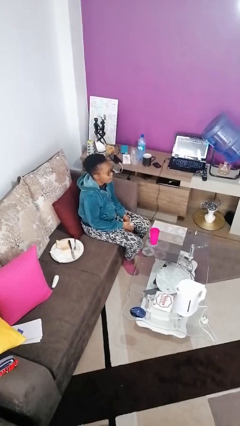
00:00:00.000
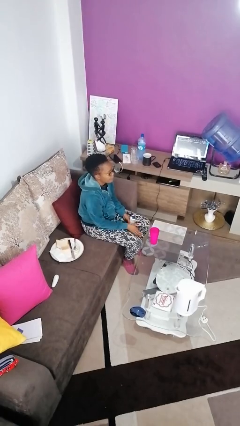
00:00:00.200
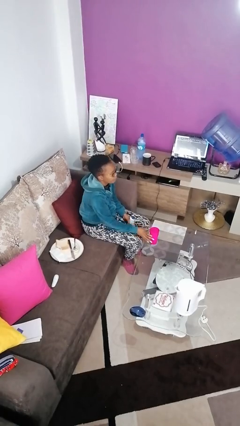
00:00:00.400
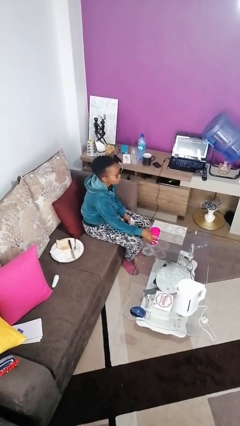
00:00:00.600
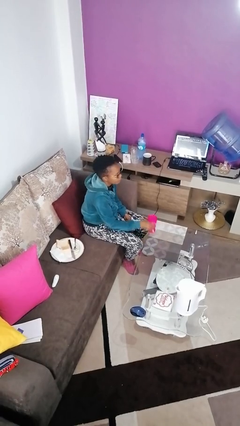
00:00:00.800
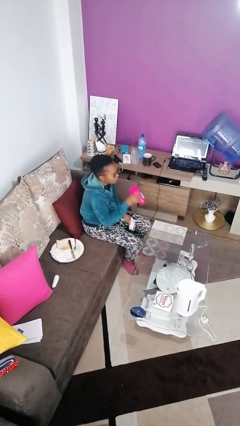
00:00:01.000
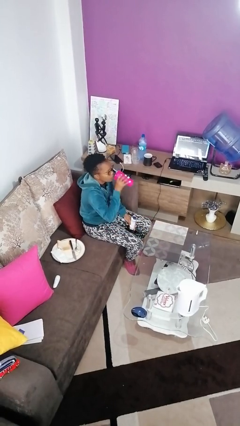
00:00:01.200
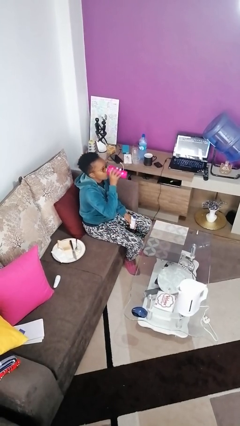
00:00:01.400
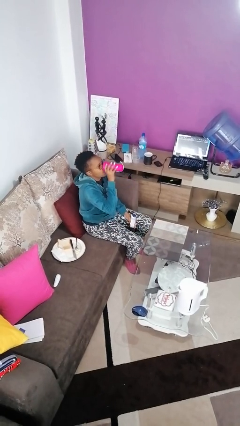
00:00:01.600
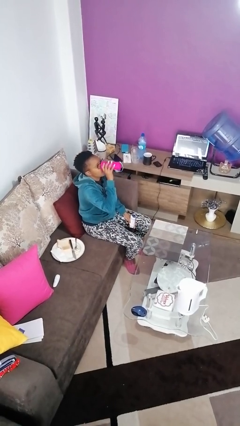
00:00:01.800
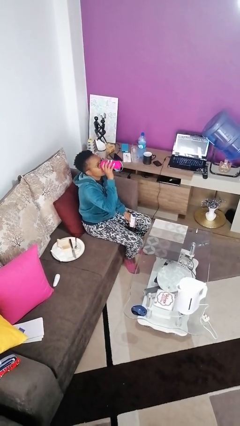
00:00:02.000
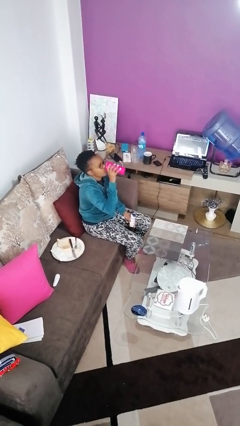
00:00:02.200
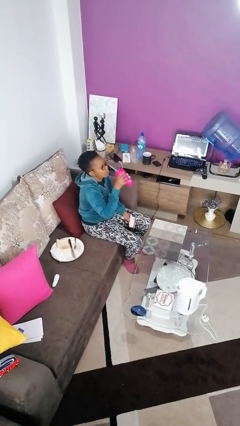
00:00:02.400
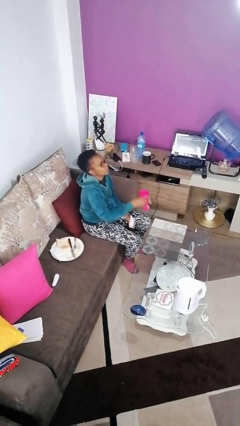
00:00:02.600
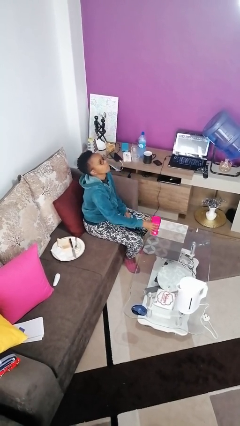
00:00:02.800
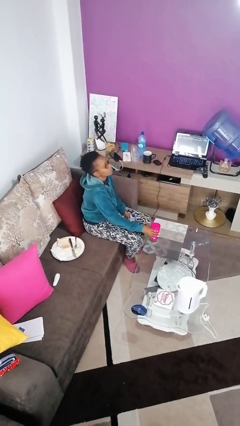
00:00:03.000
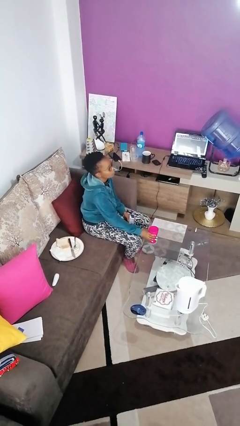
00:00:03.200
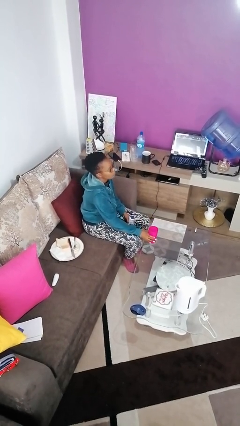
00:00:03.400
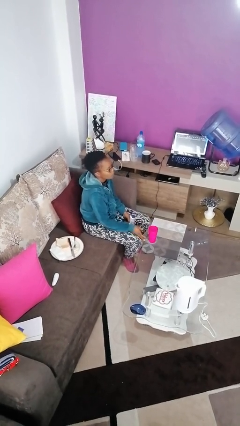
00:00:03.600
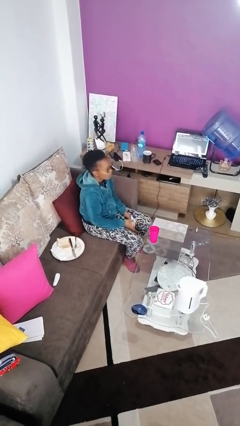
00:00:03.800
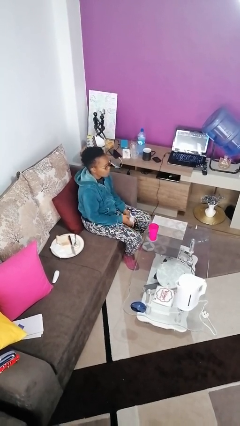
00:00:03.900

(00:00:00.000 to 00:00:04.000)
person drinks from cup

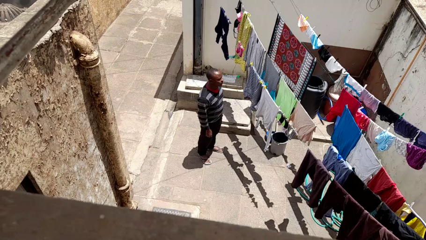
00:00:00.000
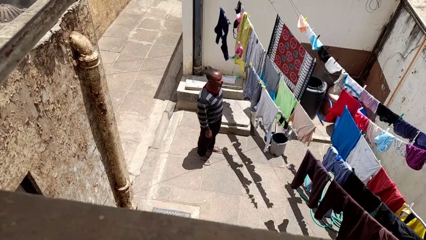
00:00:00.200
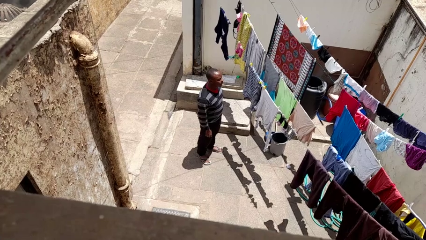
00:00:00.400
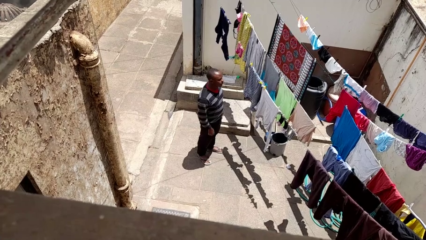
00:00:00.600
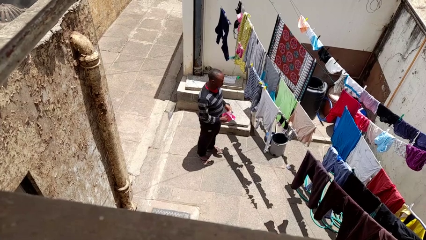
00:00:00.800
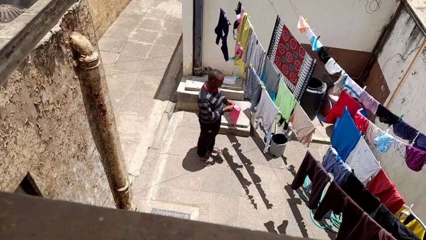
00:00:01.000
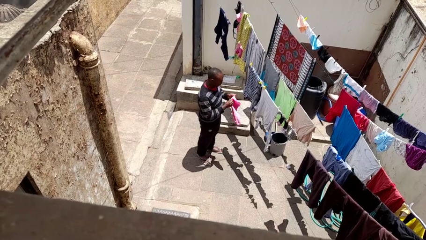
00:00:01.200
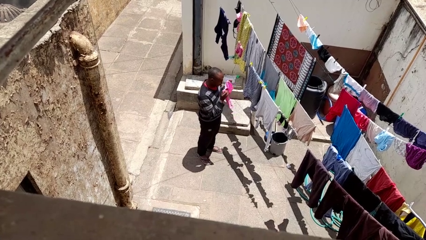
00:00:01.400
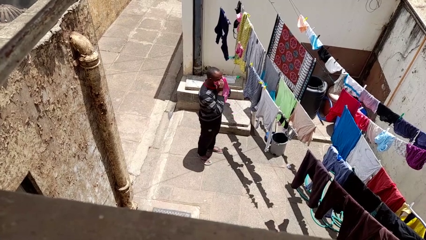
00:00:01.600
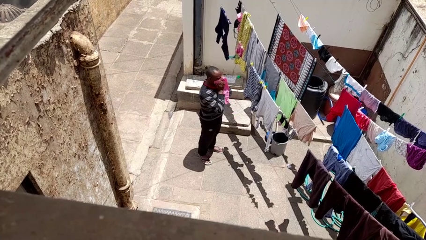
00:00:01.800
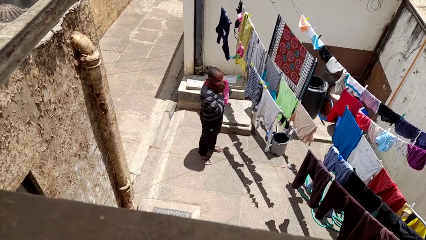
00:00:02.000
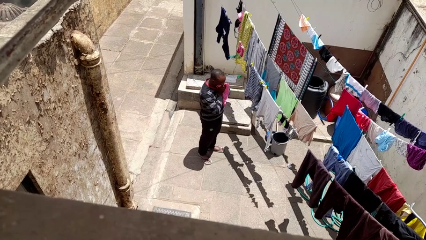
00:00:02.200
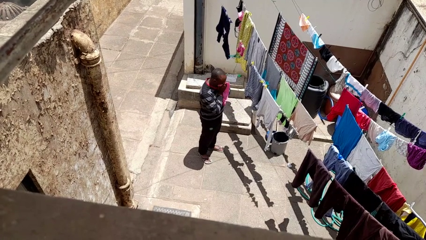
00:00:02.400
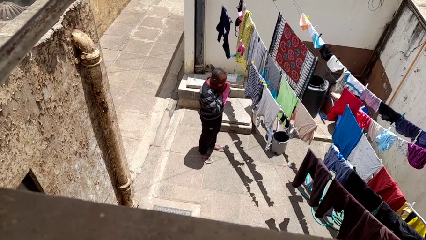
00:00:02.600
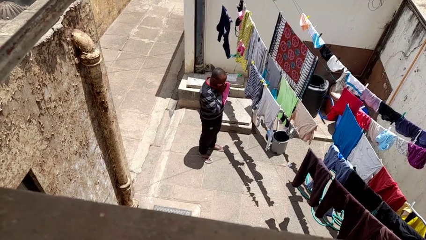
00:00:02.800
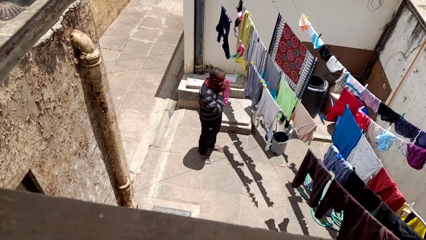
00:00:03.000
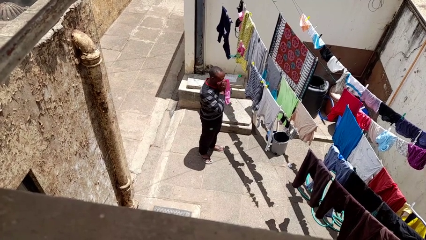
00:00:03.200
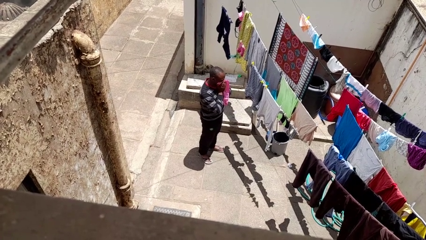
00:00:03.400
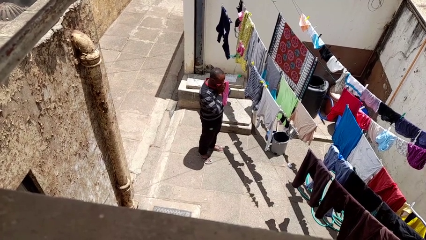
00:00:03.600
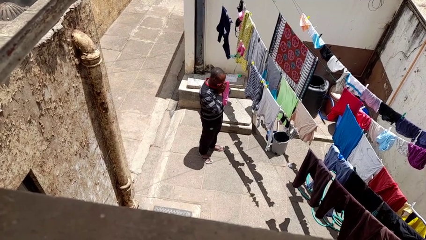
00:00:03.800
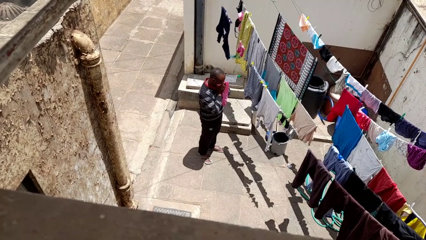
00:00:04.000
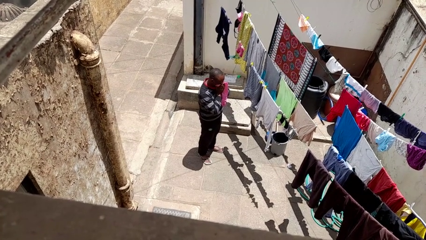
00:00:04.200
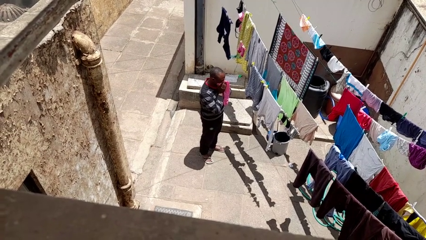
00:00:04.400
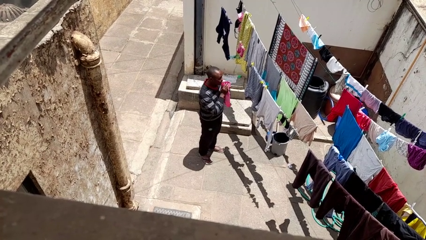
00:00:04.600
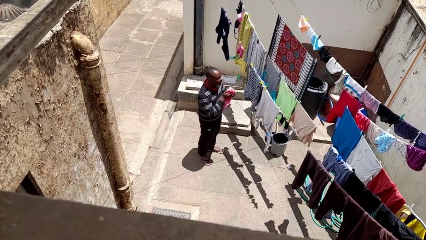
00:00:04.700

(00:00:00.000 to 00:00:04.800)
person blows nose
